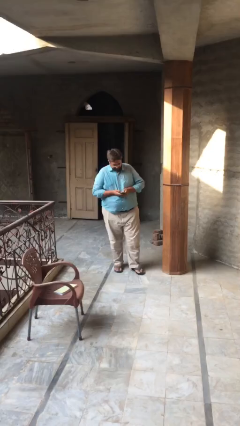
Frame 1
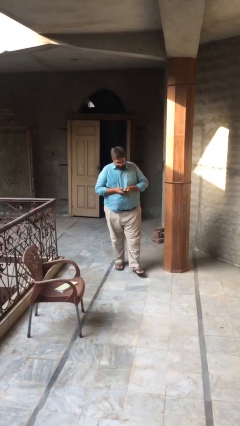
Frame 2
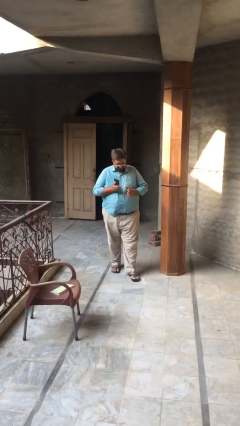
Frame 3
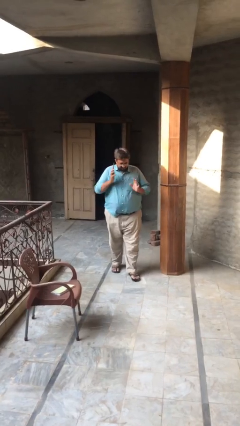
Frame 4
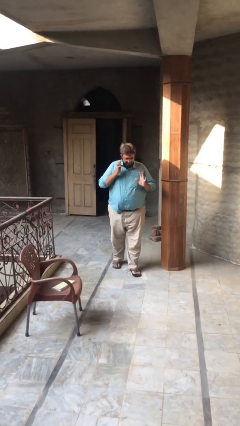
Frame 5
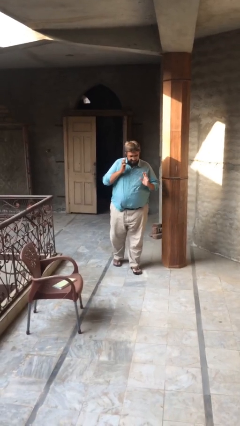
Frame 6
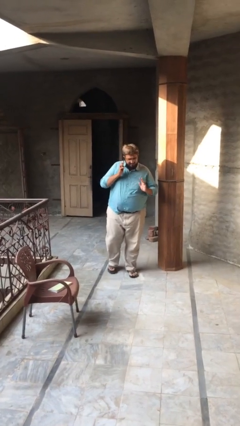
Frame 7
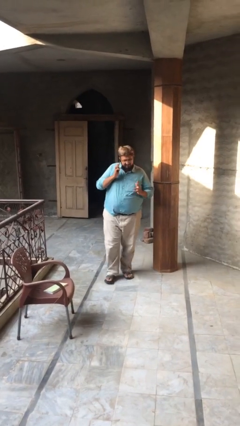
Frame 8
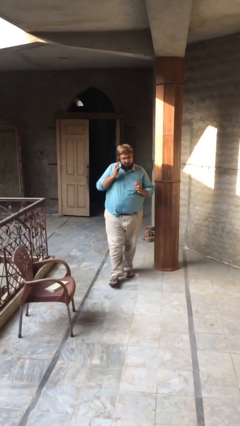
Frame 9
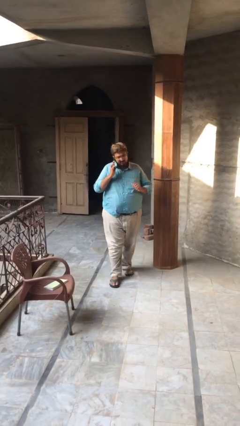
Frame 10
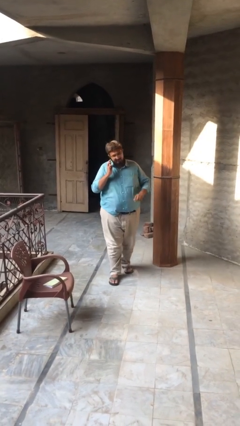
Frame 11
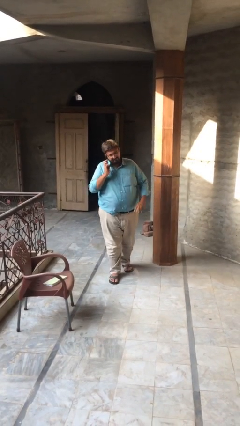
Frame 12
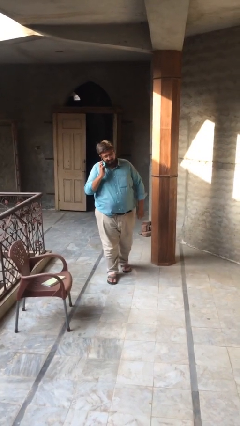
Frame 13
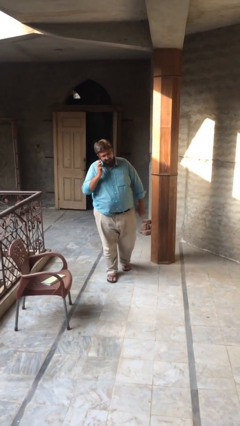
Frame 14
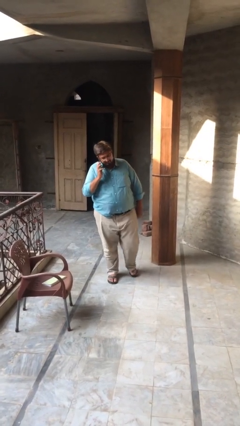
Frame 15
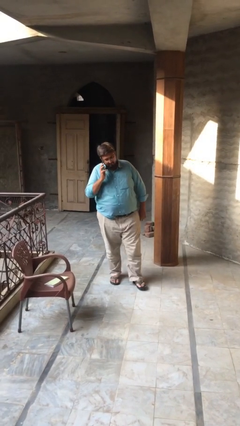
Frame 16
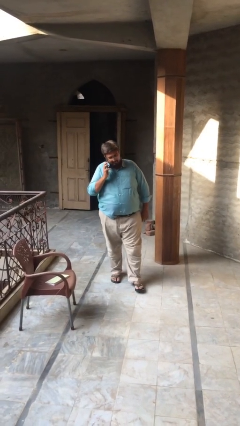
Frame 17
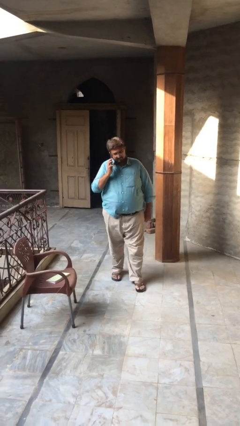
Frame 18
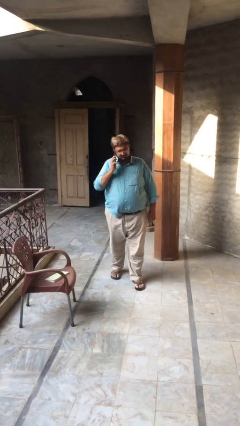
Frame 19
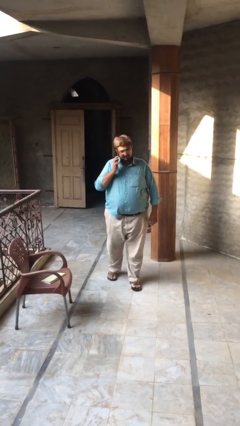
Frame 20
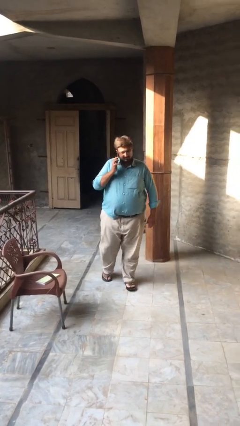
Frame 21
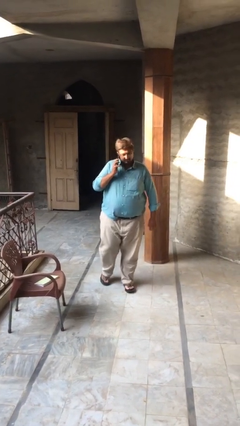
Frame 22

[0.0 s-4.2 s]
person talks on phone

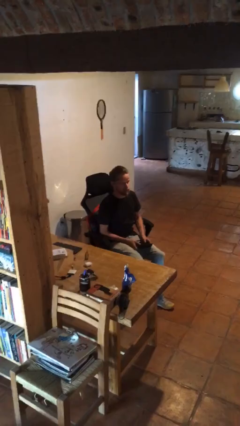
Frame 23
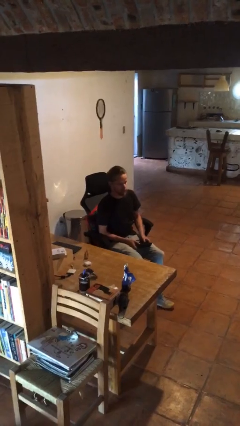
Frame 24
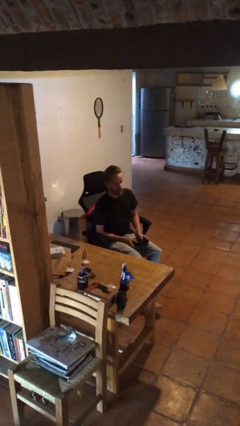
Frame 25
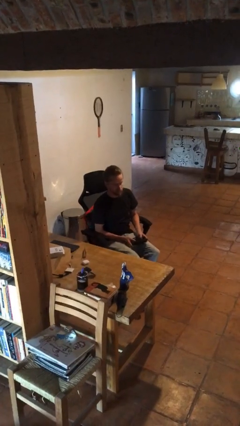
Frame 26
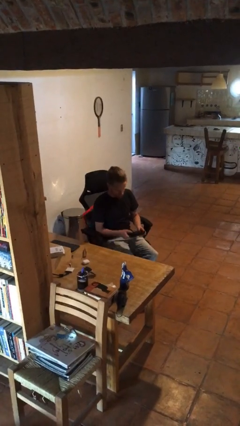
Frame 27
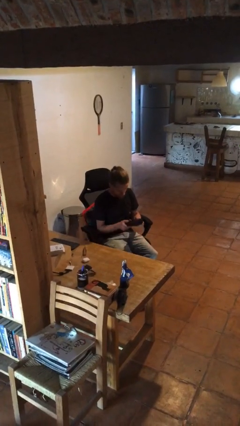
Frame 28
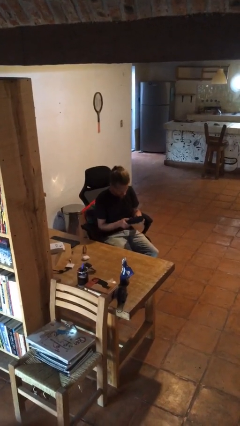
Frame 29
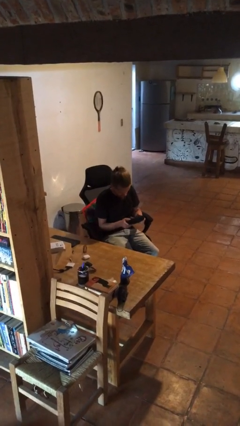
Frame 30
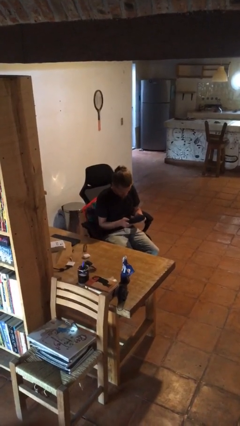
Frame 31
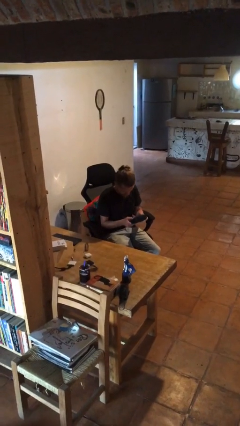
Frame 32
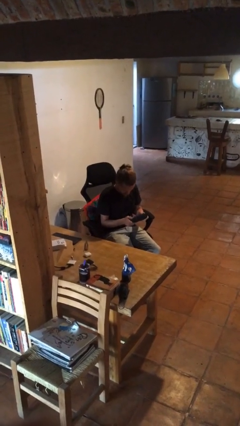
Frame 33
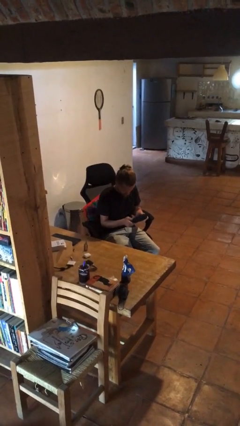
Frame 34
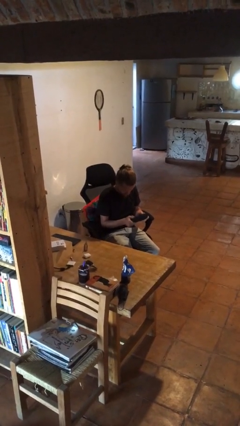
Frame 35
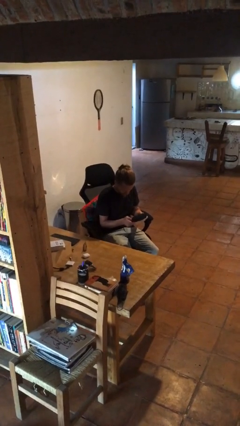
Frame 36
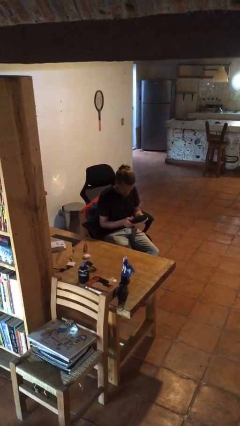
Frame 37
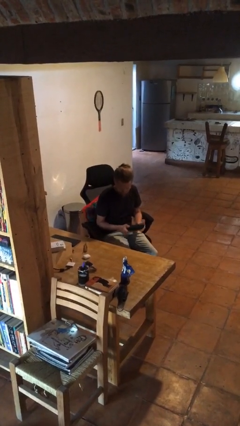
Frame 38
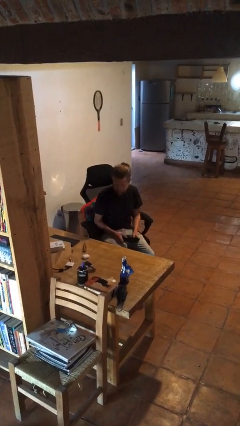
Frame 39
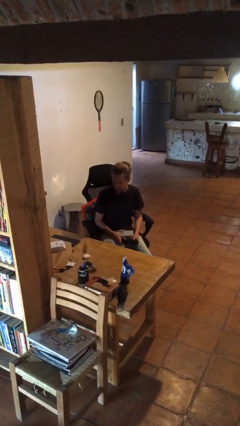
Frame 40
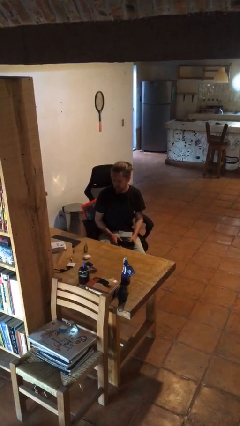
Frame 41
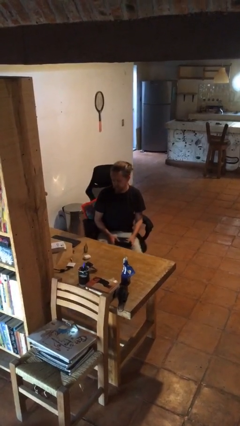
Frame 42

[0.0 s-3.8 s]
person interacts with handheld game

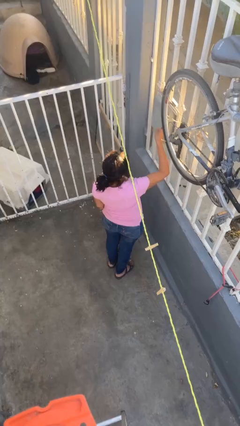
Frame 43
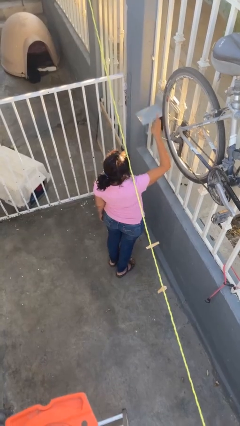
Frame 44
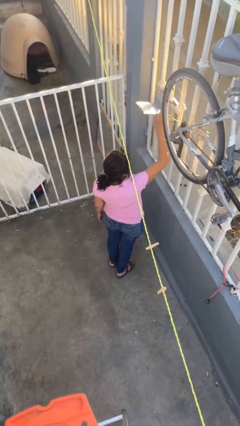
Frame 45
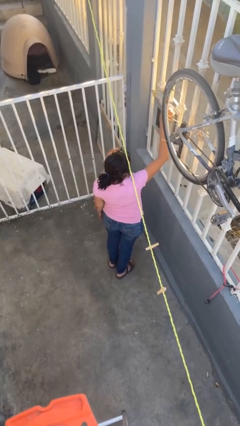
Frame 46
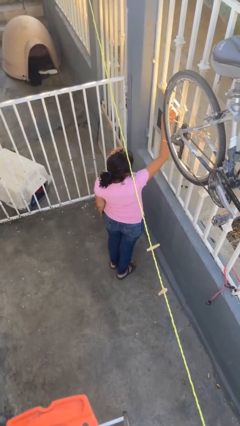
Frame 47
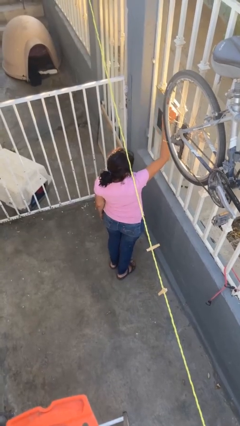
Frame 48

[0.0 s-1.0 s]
person opens mailbox

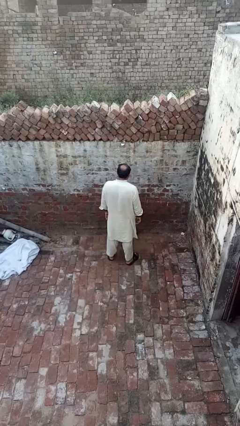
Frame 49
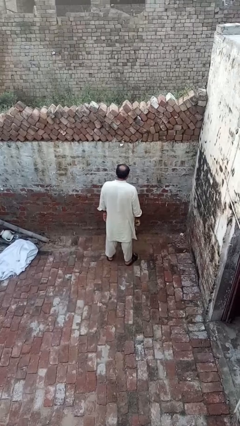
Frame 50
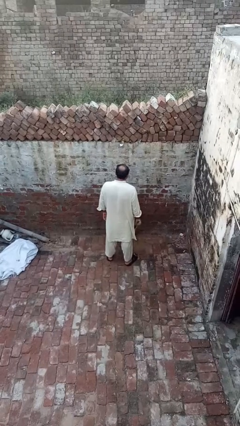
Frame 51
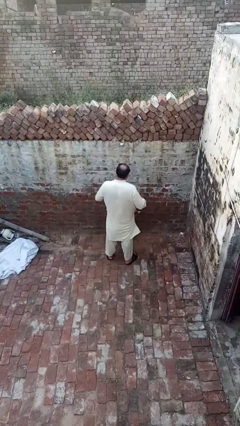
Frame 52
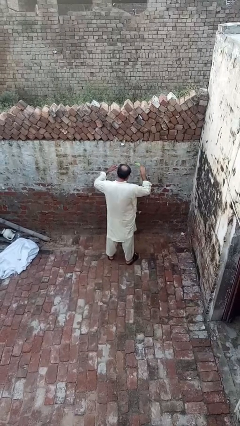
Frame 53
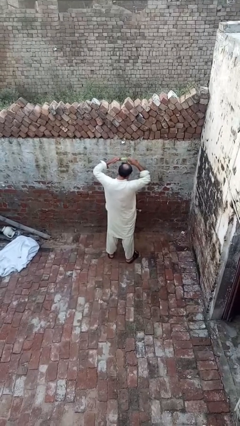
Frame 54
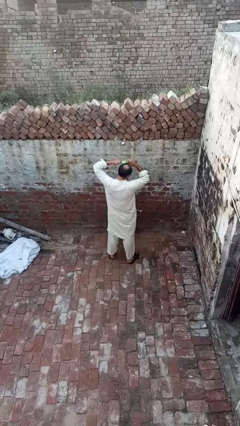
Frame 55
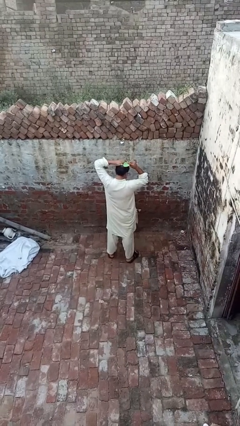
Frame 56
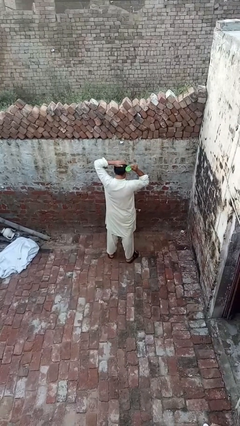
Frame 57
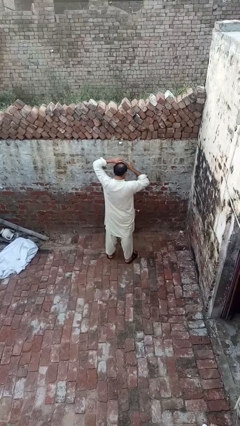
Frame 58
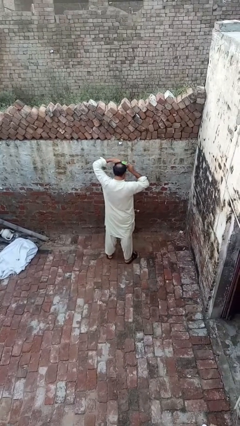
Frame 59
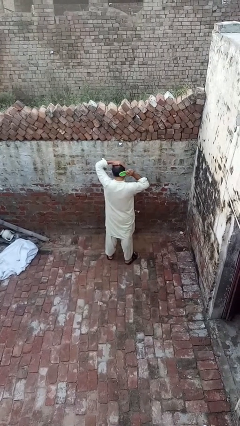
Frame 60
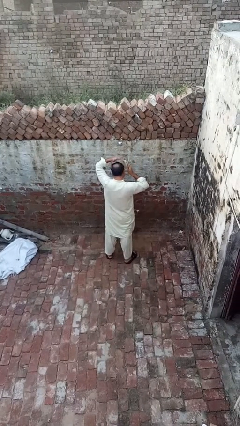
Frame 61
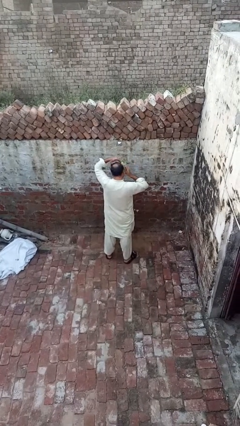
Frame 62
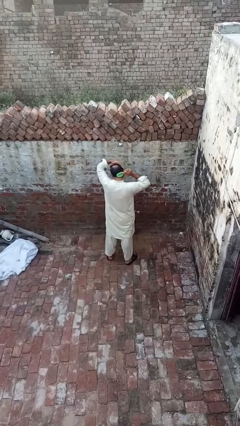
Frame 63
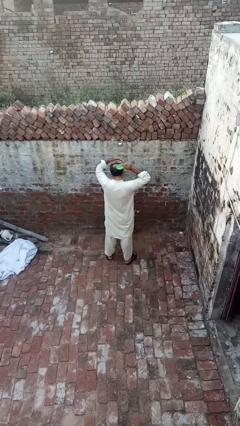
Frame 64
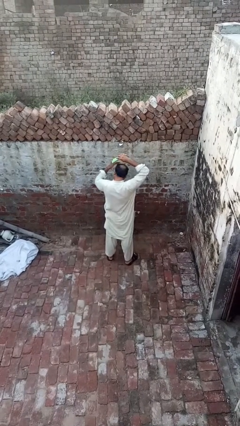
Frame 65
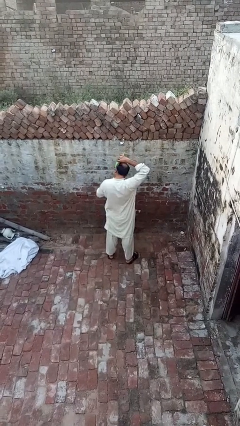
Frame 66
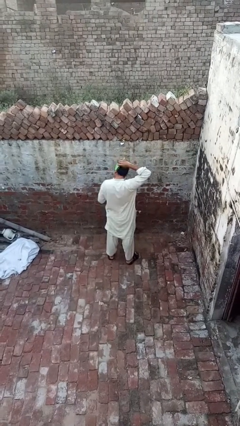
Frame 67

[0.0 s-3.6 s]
person brushes hair

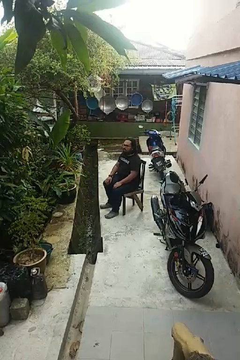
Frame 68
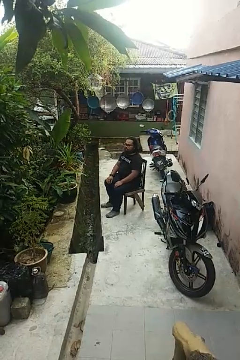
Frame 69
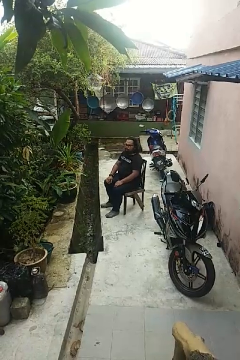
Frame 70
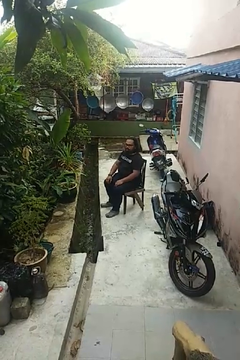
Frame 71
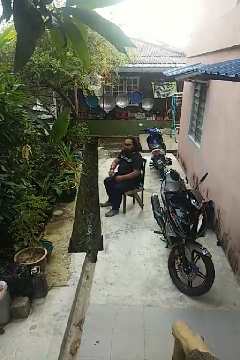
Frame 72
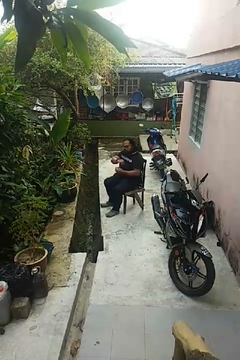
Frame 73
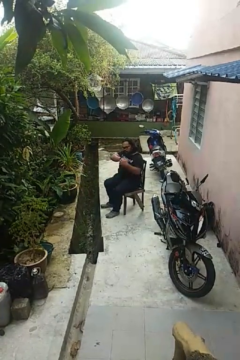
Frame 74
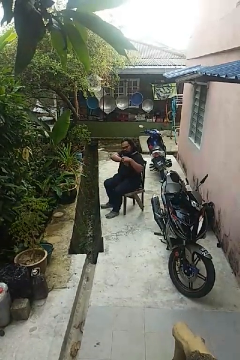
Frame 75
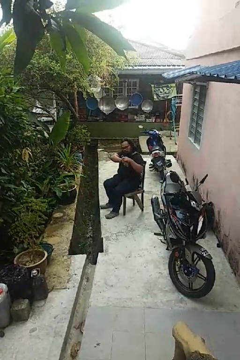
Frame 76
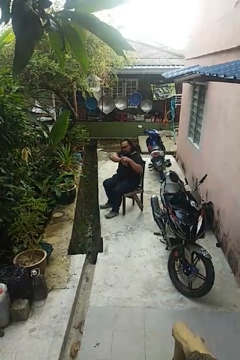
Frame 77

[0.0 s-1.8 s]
person looks at wristwatch

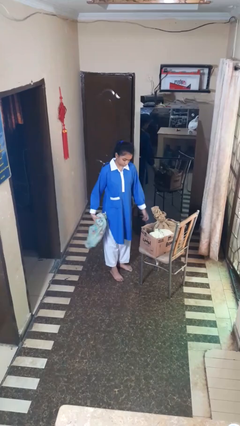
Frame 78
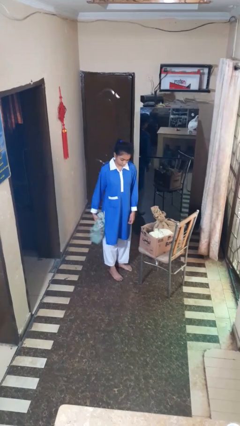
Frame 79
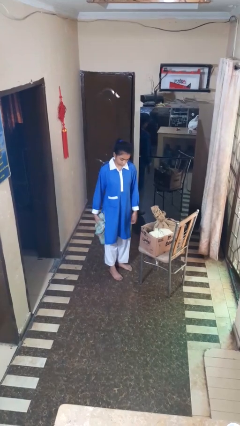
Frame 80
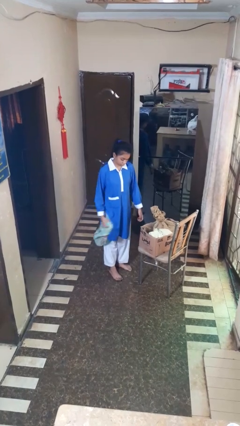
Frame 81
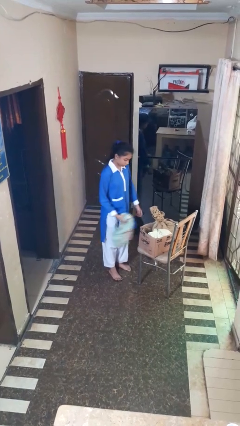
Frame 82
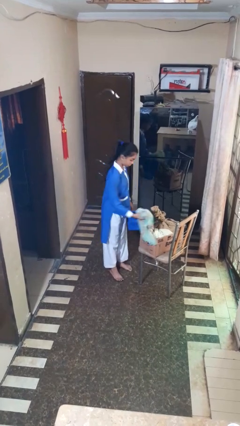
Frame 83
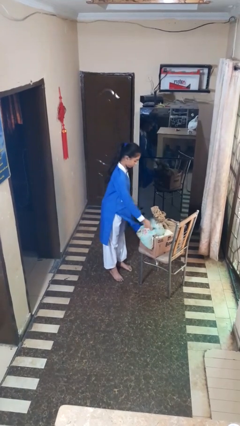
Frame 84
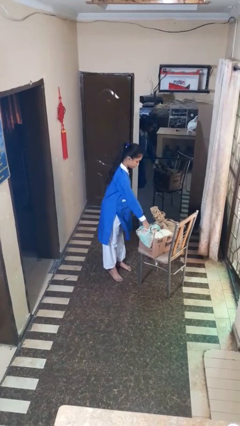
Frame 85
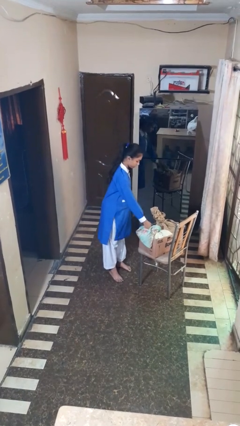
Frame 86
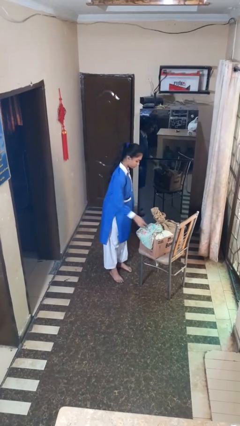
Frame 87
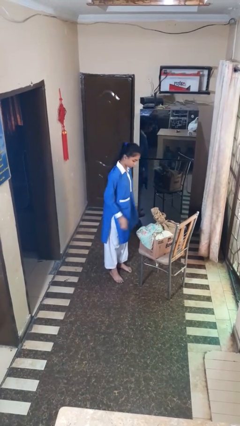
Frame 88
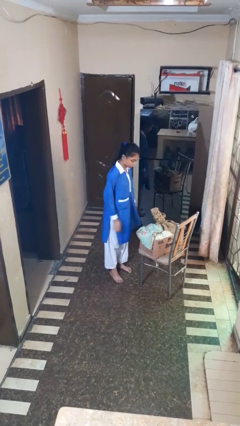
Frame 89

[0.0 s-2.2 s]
person puts object into box

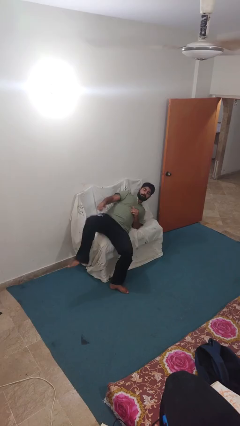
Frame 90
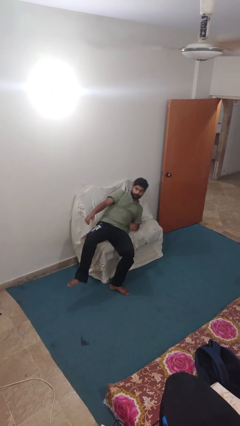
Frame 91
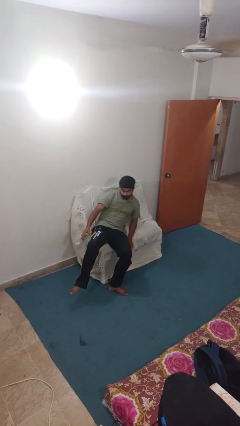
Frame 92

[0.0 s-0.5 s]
person lies down on couch

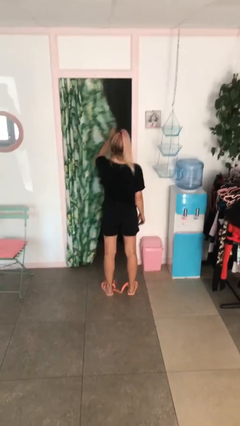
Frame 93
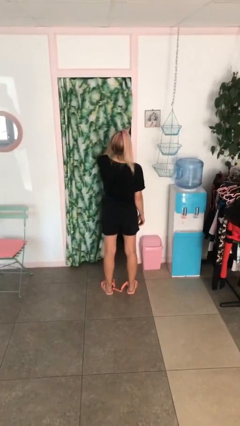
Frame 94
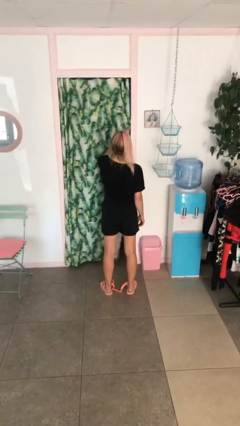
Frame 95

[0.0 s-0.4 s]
person closes sliding door
